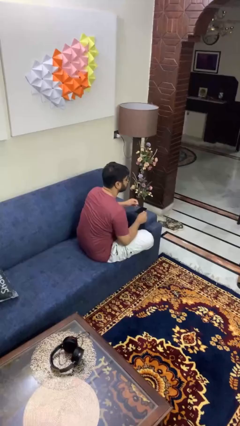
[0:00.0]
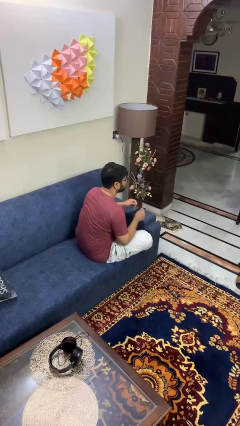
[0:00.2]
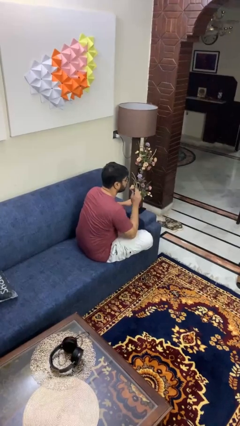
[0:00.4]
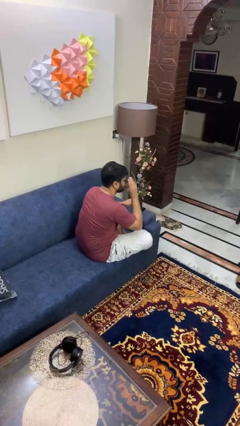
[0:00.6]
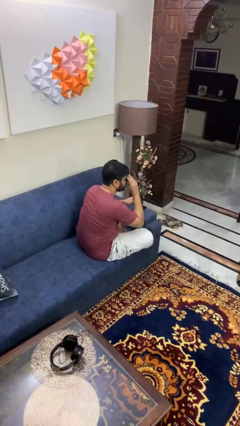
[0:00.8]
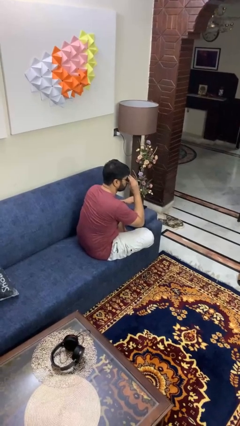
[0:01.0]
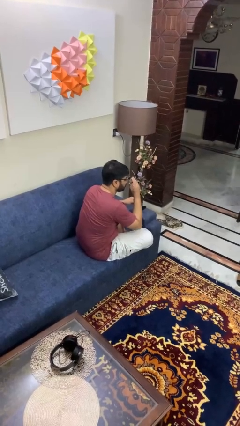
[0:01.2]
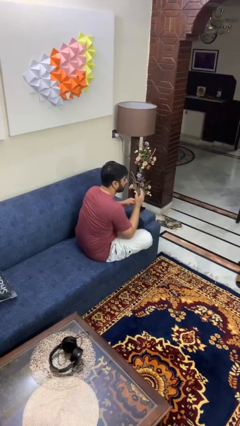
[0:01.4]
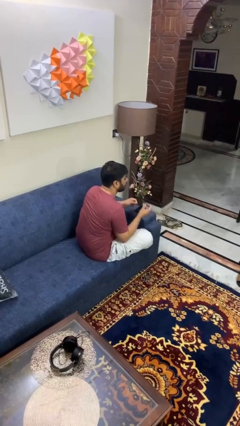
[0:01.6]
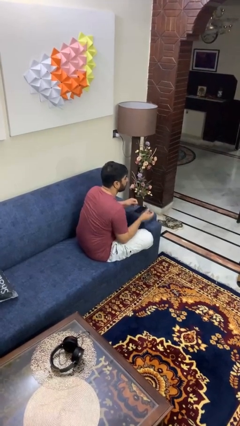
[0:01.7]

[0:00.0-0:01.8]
person takes off glasses

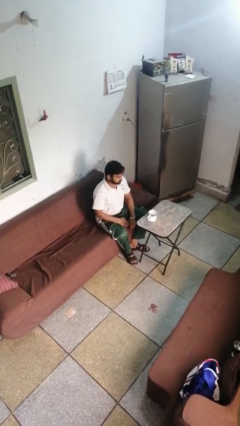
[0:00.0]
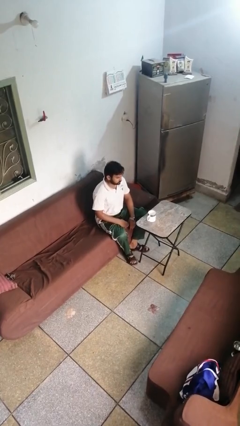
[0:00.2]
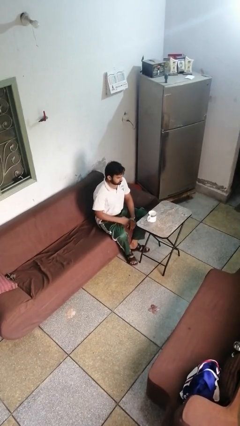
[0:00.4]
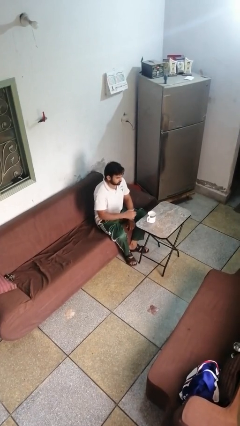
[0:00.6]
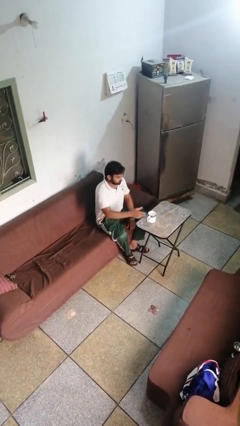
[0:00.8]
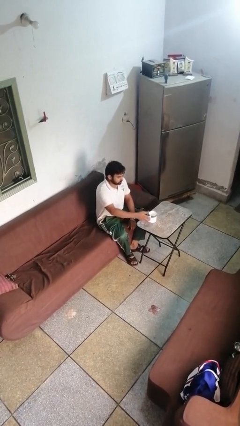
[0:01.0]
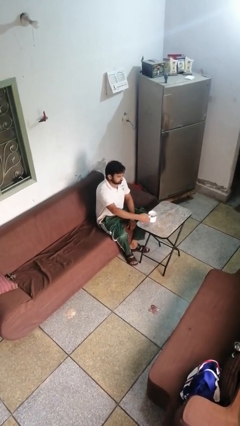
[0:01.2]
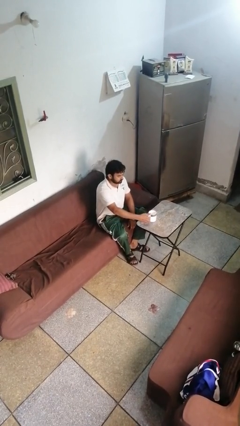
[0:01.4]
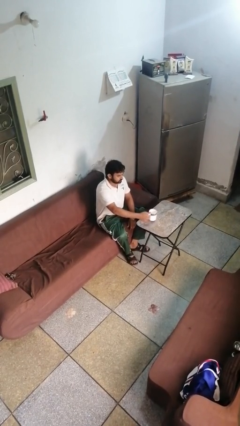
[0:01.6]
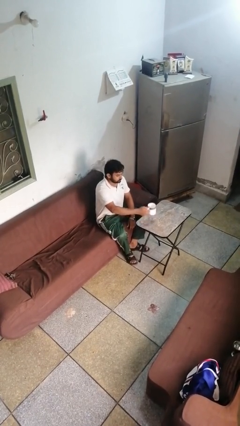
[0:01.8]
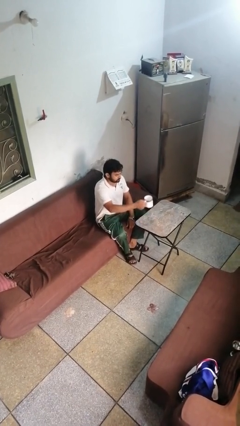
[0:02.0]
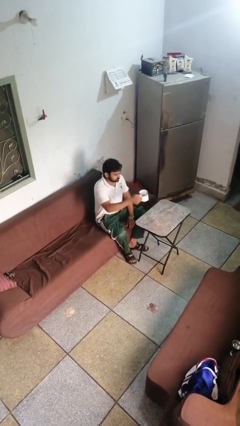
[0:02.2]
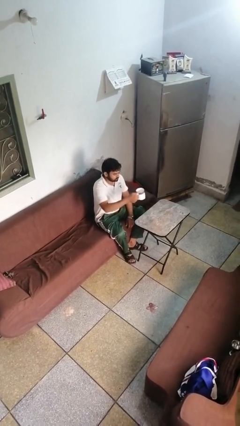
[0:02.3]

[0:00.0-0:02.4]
person picks up object from table

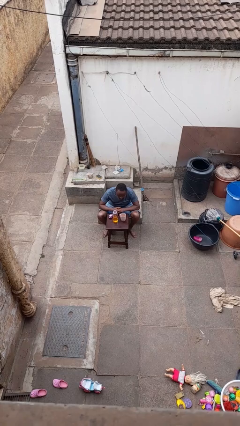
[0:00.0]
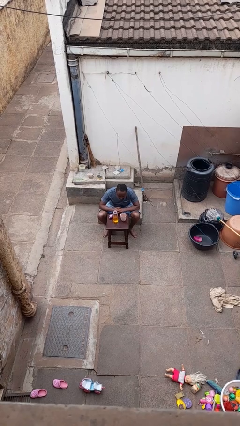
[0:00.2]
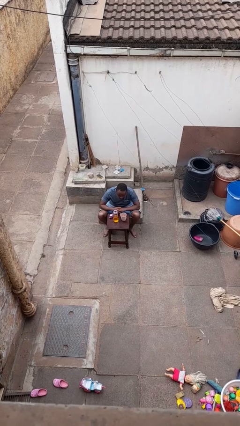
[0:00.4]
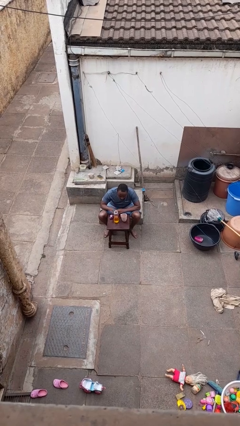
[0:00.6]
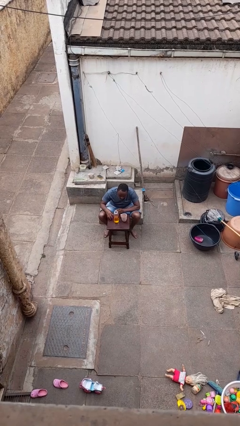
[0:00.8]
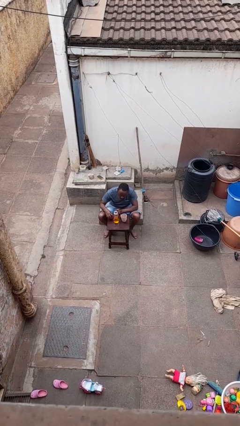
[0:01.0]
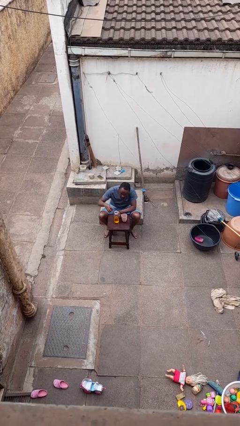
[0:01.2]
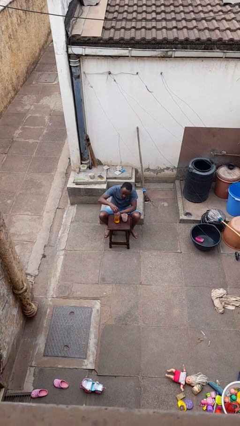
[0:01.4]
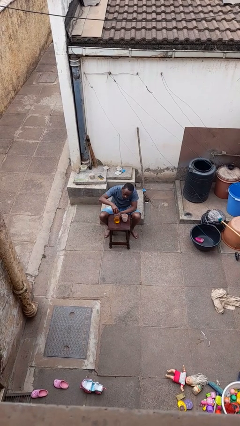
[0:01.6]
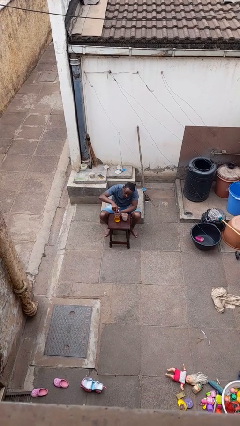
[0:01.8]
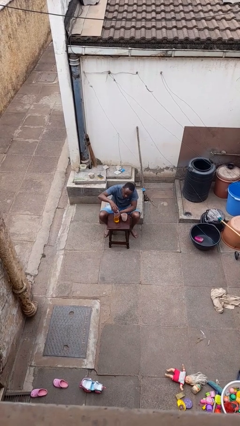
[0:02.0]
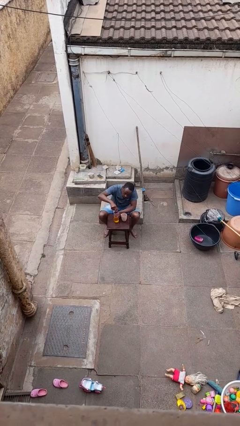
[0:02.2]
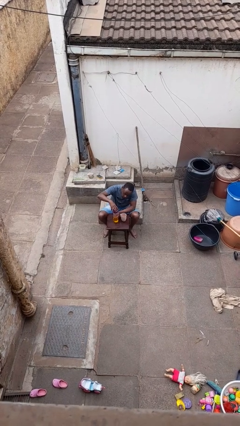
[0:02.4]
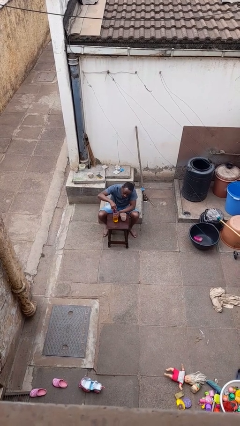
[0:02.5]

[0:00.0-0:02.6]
person screws lid to bottle

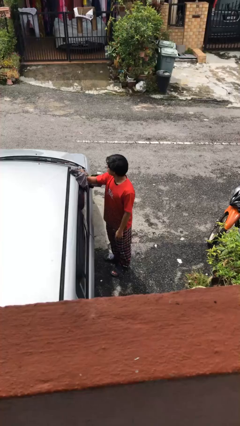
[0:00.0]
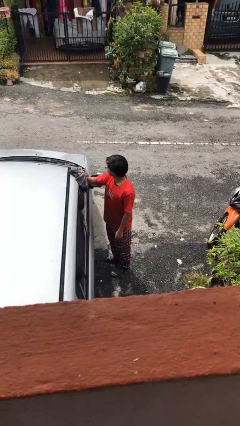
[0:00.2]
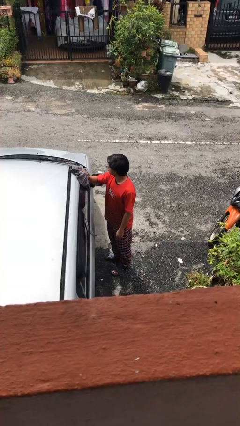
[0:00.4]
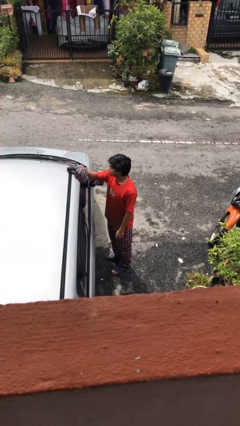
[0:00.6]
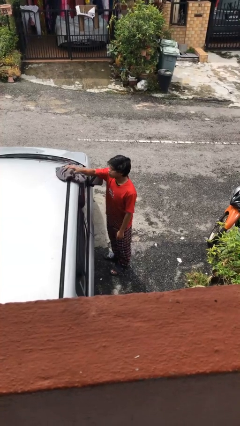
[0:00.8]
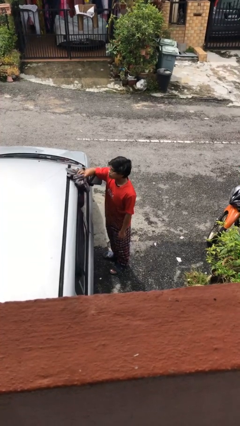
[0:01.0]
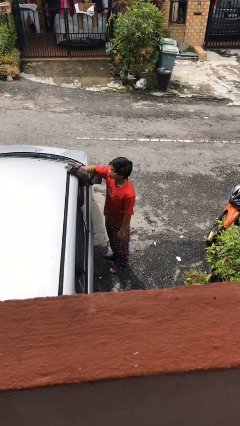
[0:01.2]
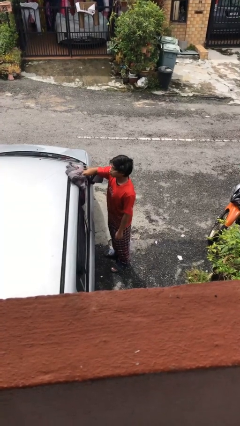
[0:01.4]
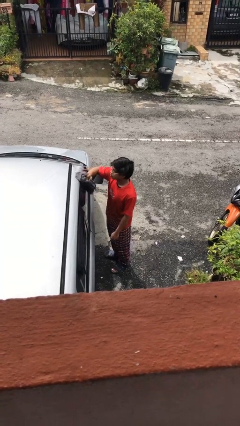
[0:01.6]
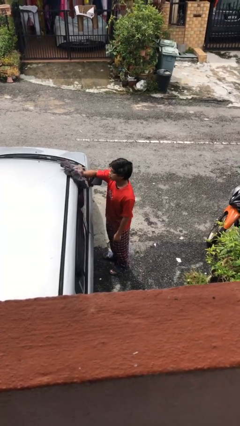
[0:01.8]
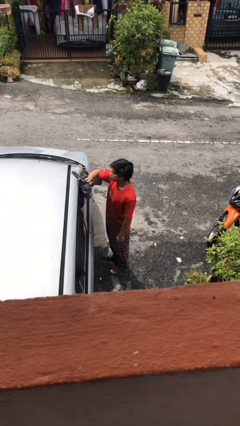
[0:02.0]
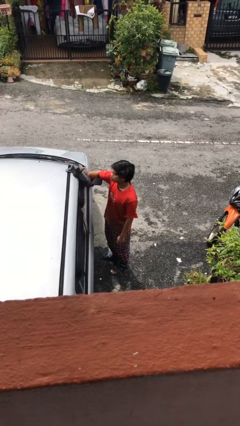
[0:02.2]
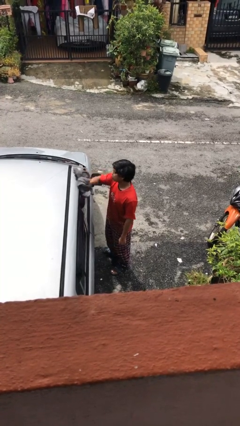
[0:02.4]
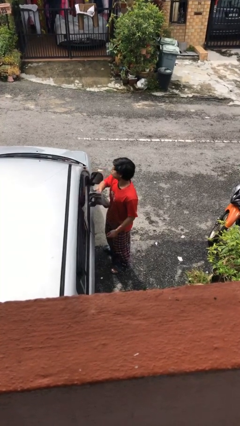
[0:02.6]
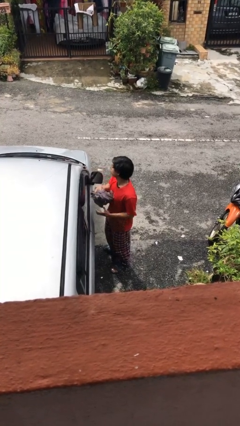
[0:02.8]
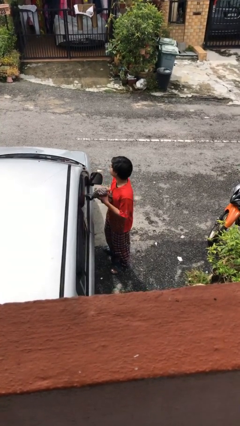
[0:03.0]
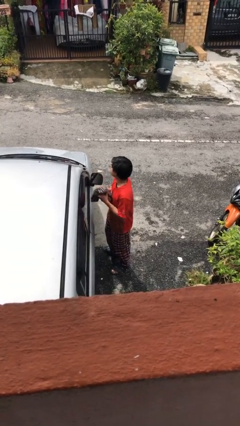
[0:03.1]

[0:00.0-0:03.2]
person polishes car with rag

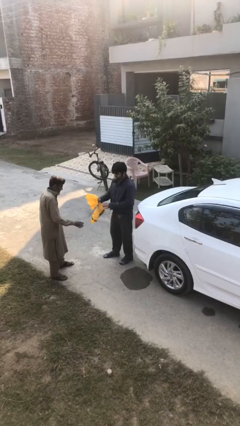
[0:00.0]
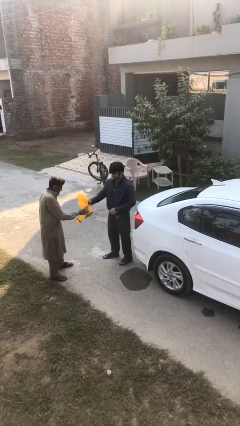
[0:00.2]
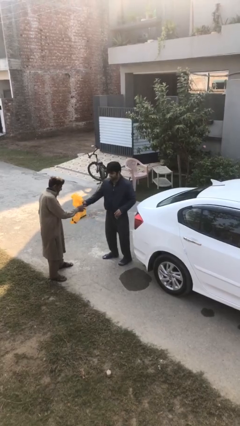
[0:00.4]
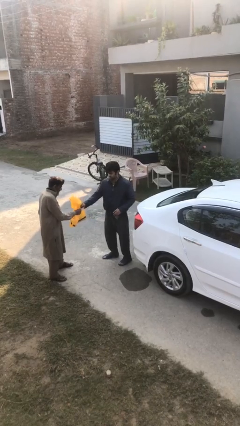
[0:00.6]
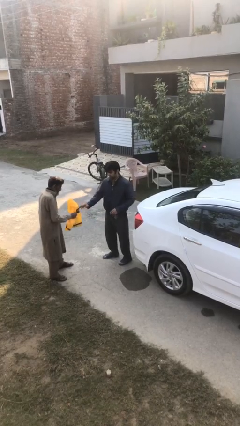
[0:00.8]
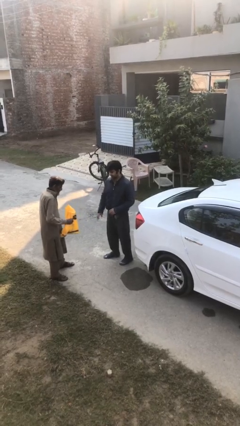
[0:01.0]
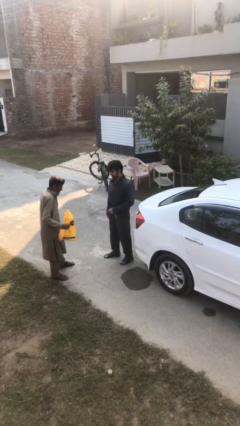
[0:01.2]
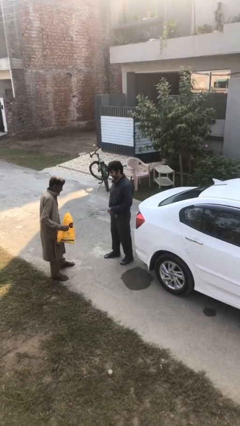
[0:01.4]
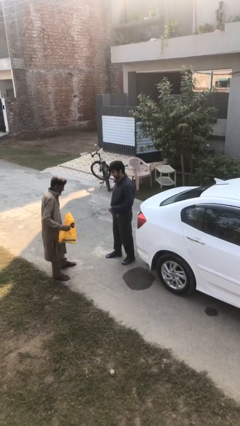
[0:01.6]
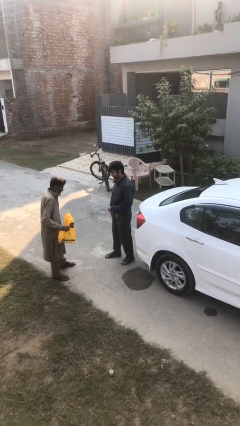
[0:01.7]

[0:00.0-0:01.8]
person transfers object to person

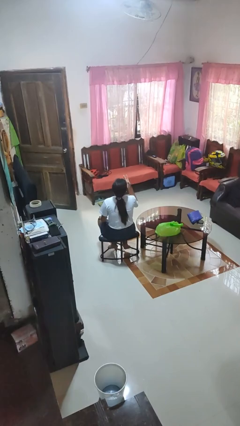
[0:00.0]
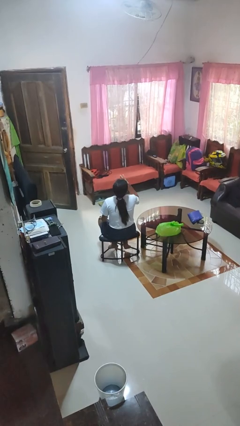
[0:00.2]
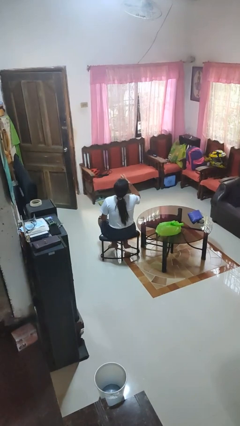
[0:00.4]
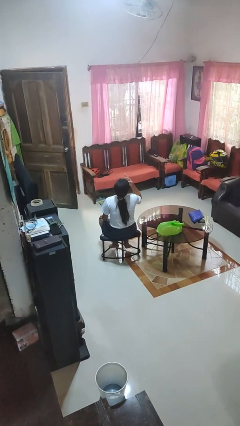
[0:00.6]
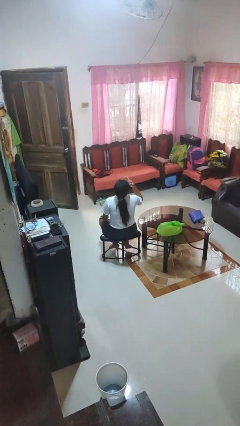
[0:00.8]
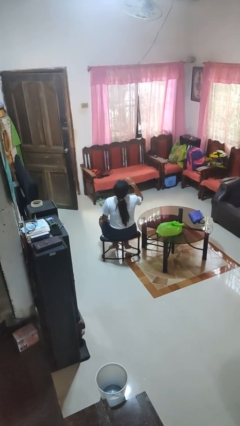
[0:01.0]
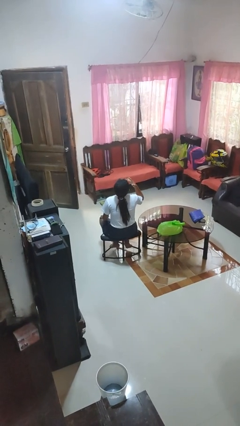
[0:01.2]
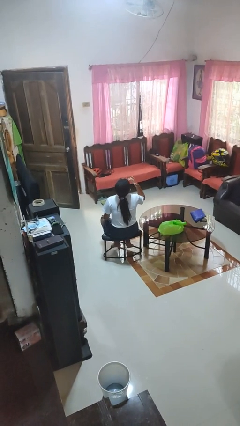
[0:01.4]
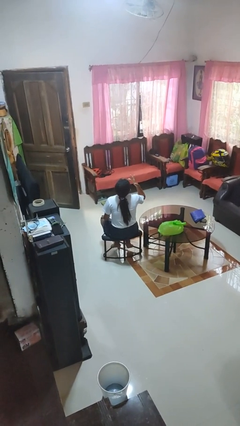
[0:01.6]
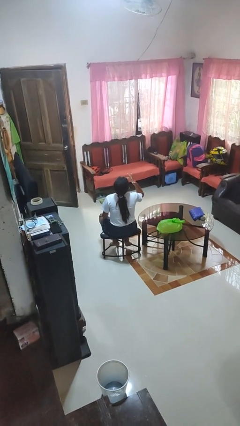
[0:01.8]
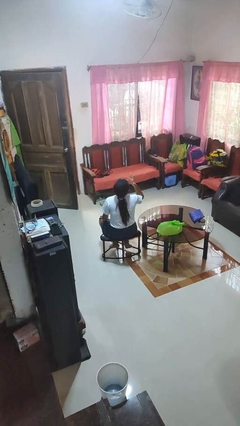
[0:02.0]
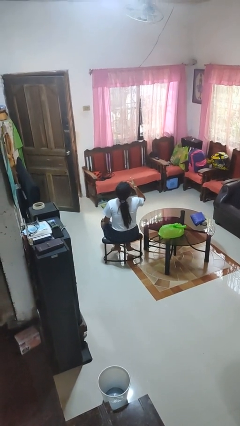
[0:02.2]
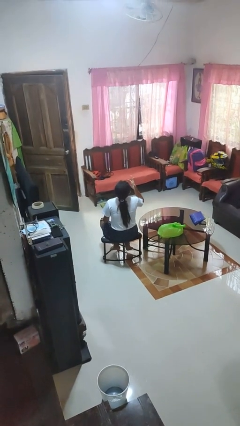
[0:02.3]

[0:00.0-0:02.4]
person licks fingers

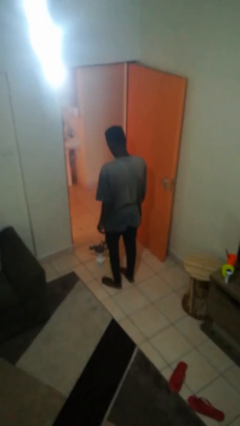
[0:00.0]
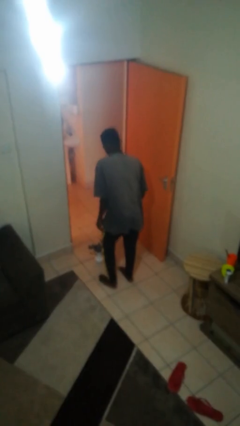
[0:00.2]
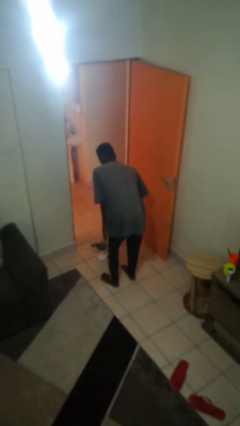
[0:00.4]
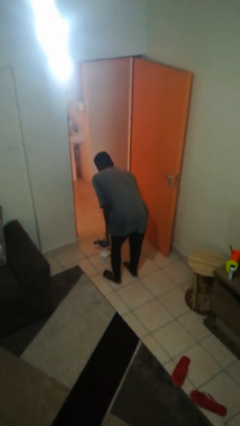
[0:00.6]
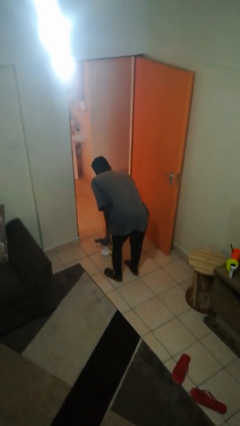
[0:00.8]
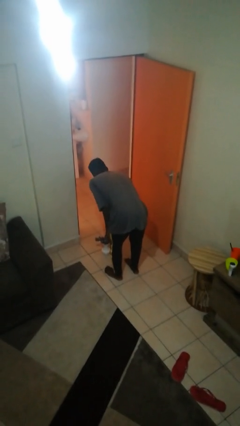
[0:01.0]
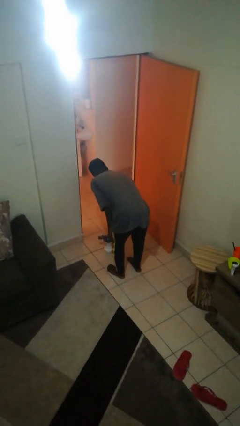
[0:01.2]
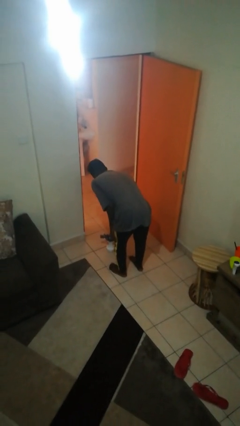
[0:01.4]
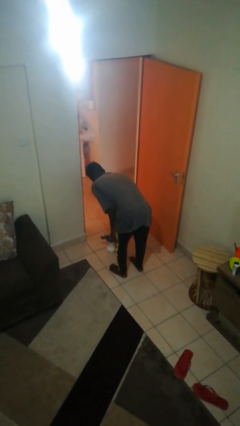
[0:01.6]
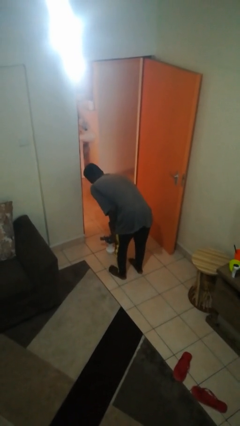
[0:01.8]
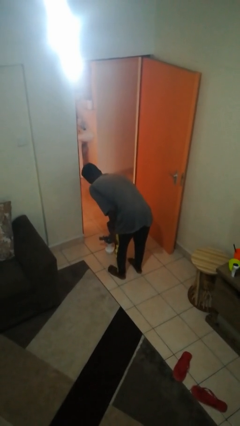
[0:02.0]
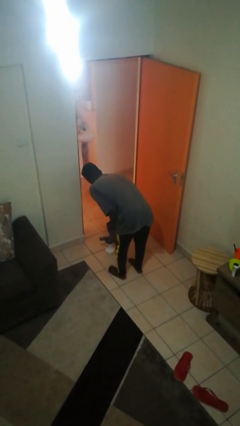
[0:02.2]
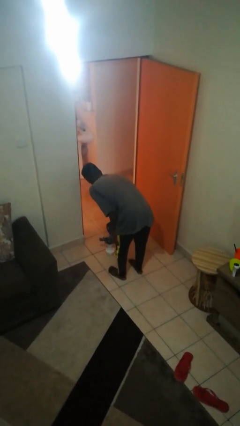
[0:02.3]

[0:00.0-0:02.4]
person waters houseplant

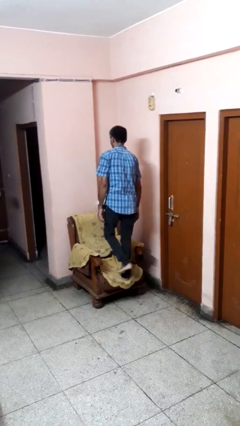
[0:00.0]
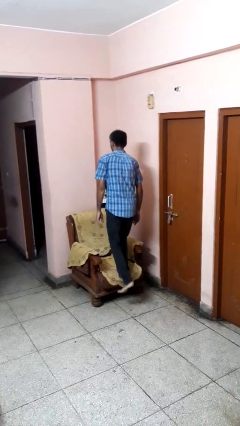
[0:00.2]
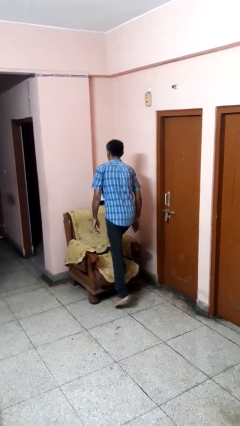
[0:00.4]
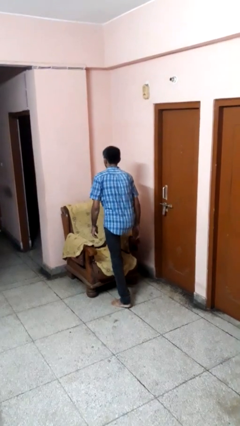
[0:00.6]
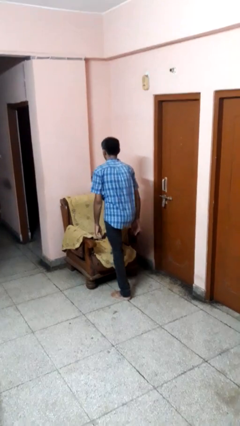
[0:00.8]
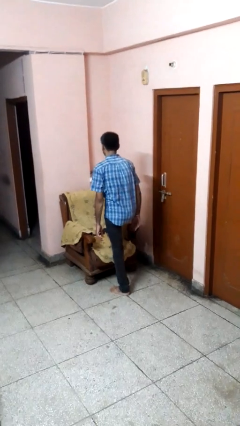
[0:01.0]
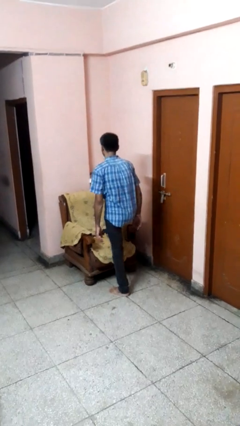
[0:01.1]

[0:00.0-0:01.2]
person climbs off couch
